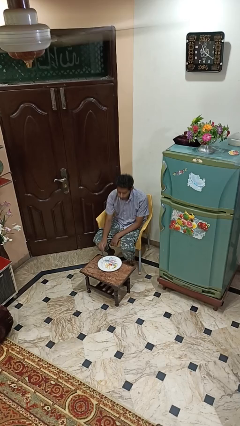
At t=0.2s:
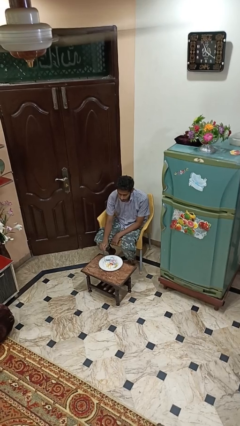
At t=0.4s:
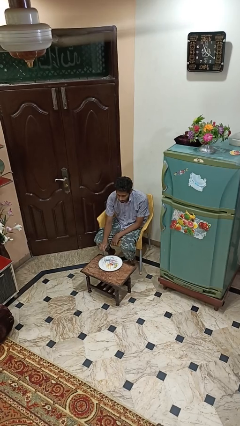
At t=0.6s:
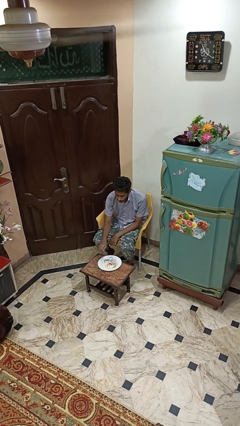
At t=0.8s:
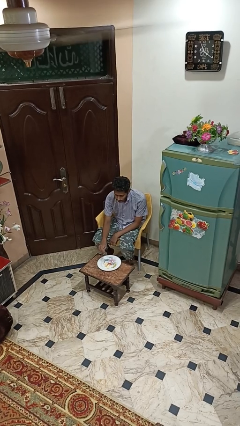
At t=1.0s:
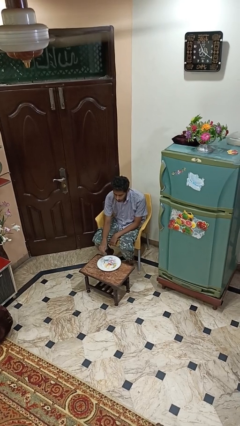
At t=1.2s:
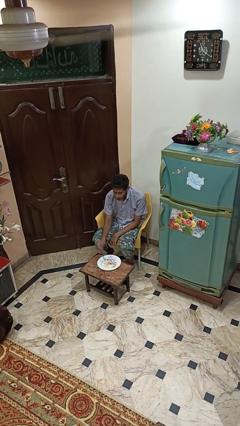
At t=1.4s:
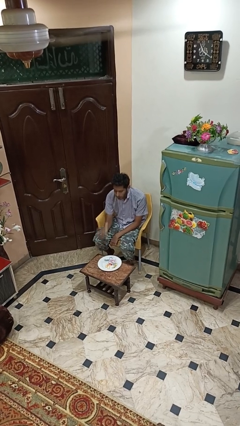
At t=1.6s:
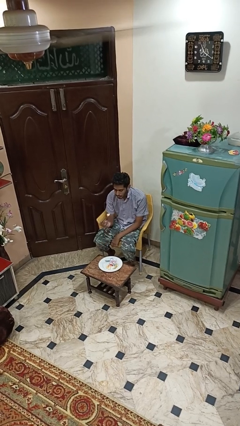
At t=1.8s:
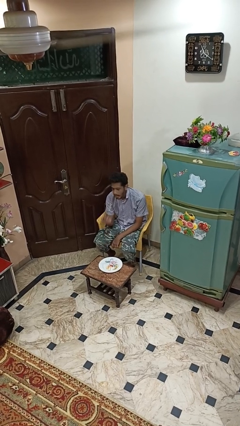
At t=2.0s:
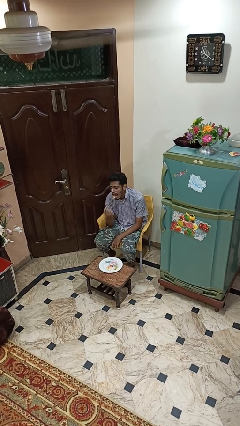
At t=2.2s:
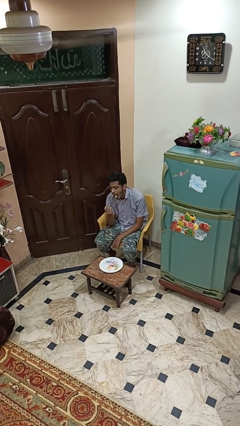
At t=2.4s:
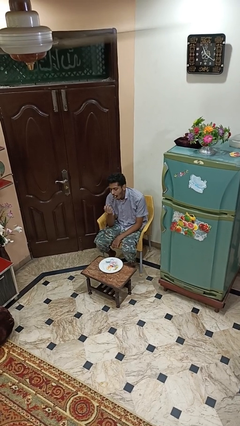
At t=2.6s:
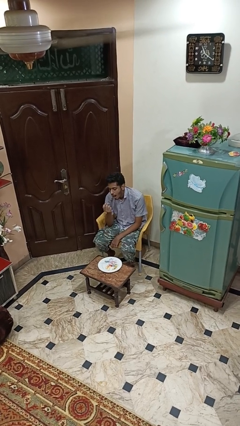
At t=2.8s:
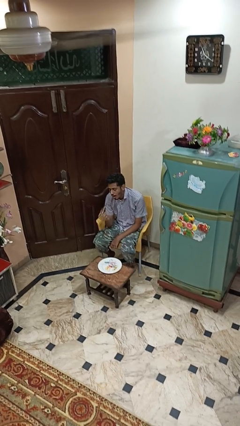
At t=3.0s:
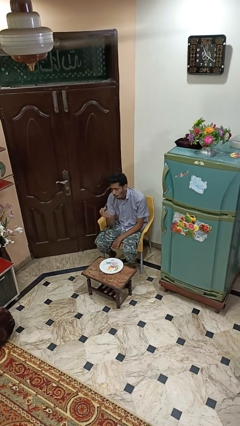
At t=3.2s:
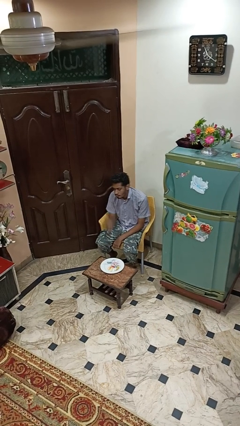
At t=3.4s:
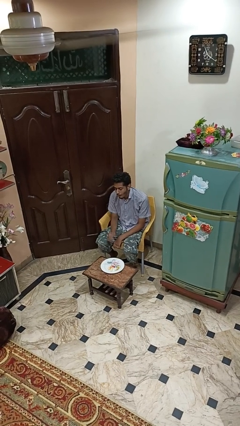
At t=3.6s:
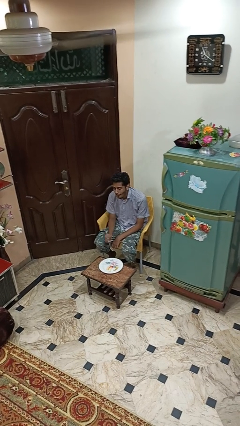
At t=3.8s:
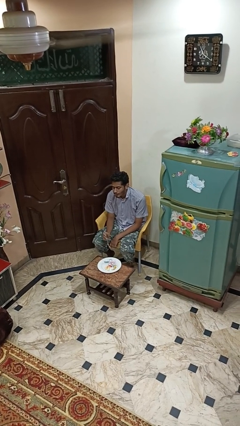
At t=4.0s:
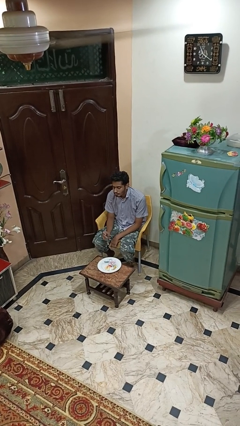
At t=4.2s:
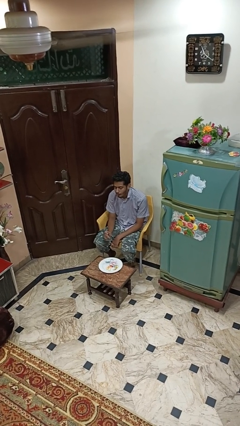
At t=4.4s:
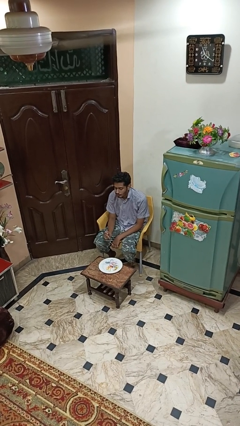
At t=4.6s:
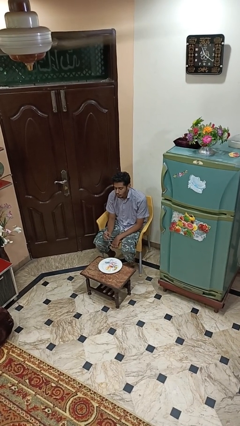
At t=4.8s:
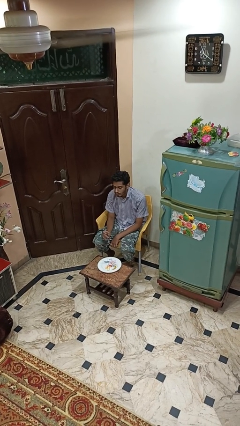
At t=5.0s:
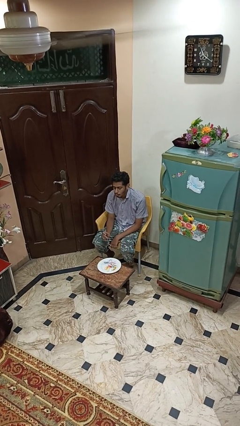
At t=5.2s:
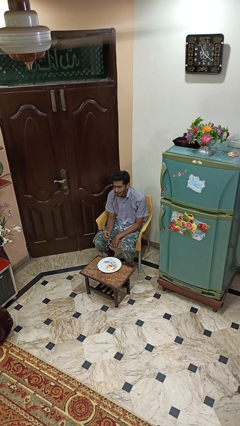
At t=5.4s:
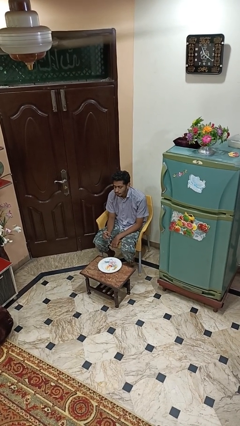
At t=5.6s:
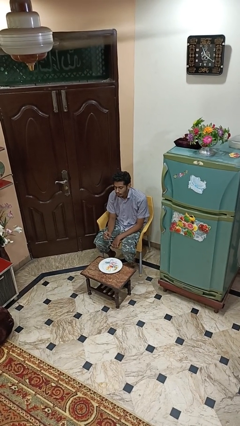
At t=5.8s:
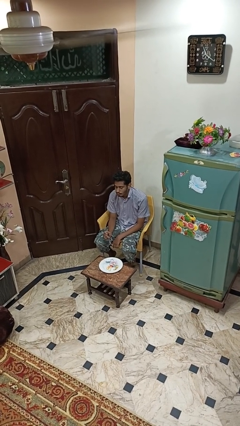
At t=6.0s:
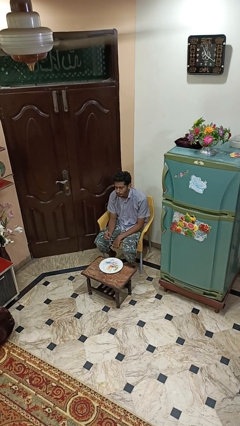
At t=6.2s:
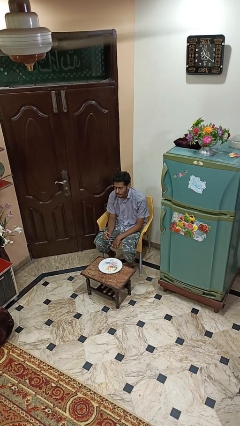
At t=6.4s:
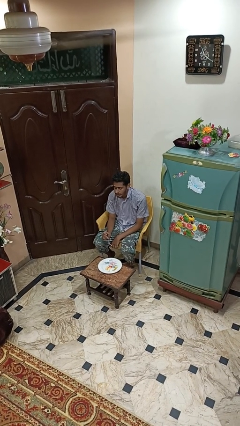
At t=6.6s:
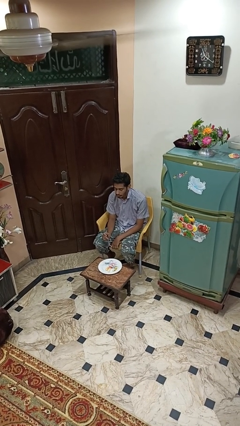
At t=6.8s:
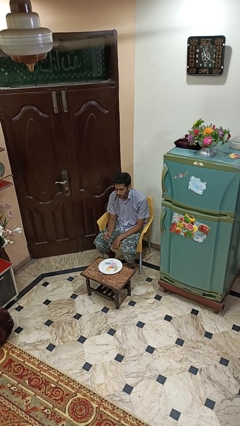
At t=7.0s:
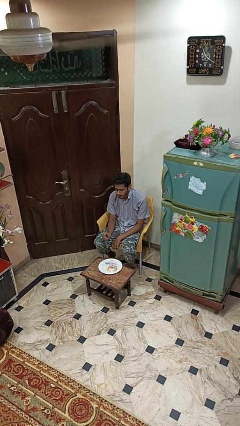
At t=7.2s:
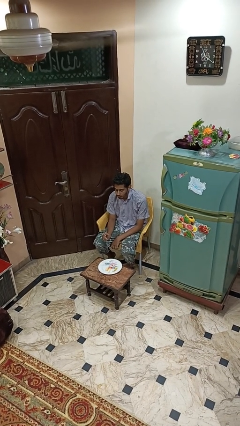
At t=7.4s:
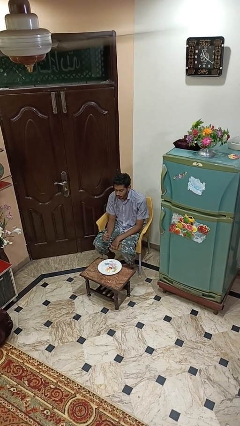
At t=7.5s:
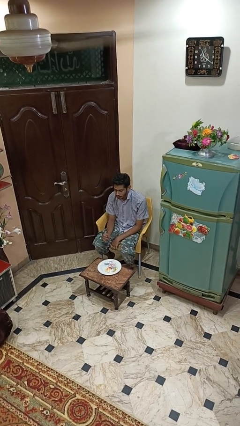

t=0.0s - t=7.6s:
person eats with utensil

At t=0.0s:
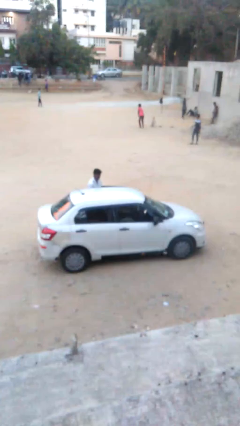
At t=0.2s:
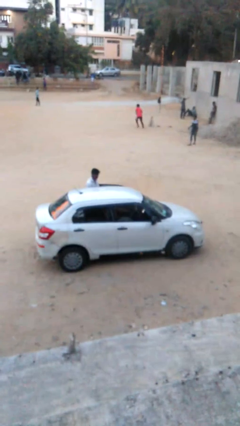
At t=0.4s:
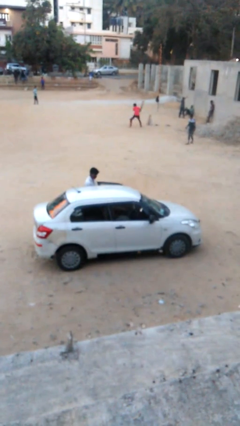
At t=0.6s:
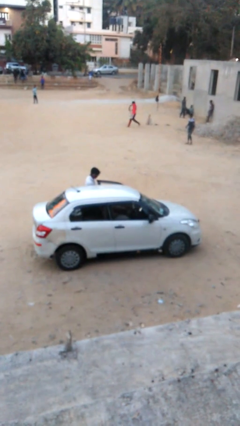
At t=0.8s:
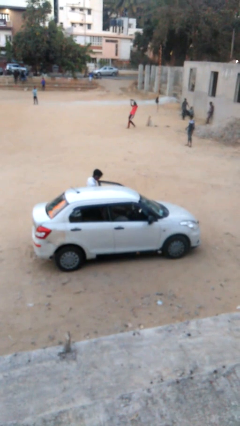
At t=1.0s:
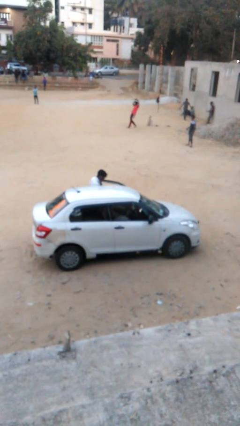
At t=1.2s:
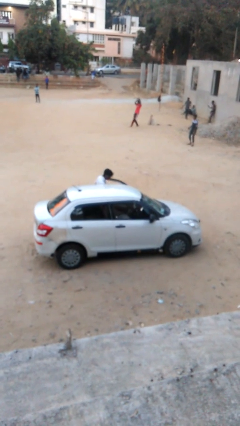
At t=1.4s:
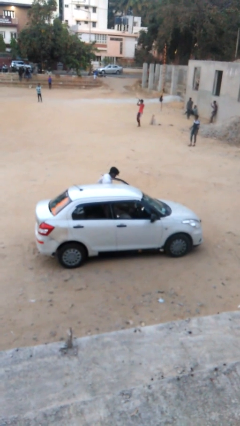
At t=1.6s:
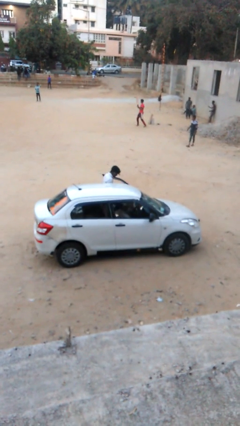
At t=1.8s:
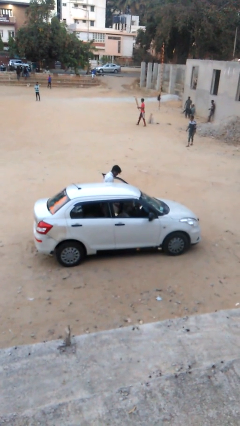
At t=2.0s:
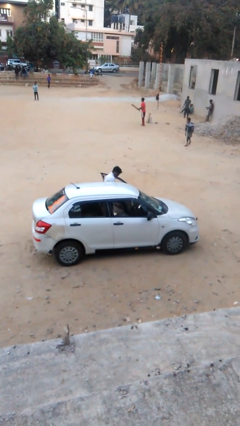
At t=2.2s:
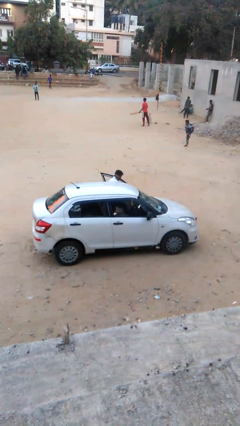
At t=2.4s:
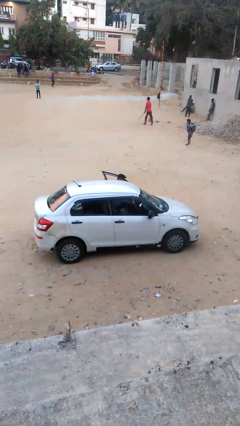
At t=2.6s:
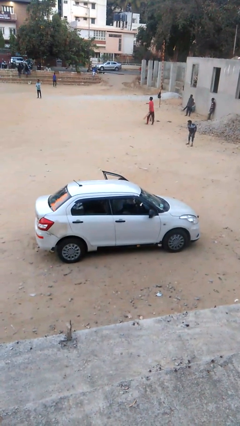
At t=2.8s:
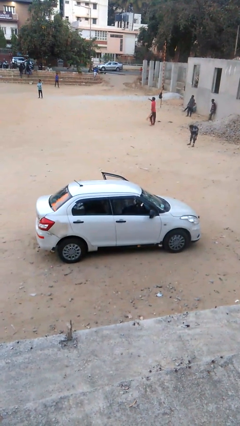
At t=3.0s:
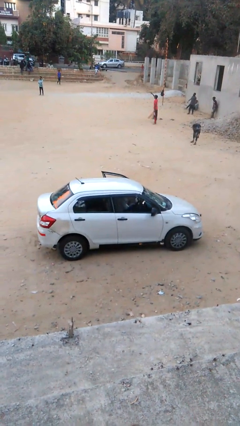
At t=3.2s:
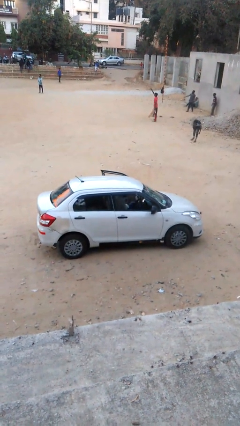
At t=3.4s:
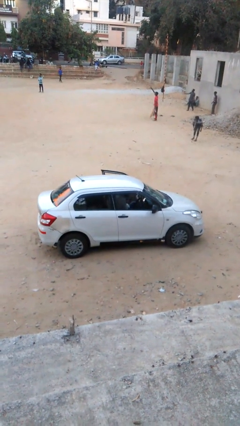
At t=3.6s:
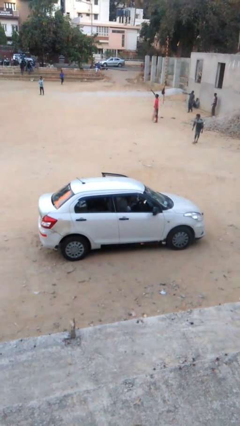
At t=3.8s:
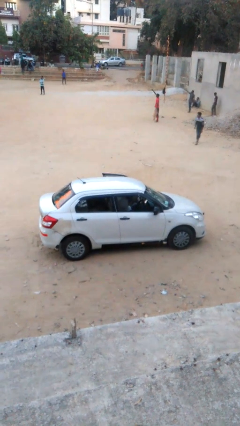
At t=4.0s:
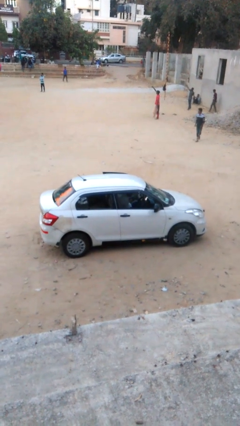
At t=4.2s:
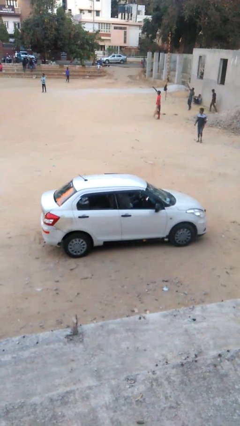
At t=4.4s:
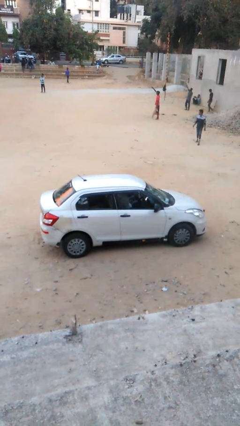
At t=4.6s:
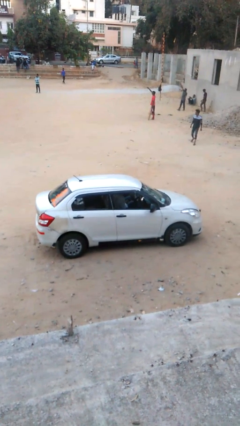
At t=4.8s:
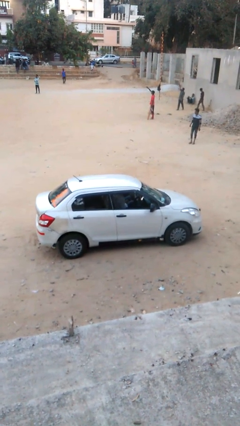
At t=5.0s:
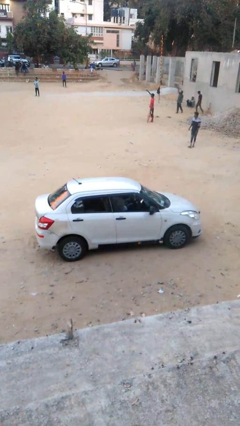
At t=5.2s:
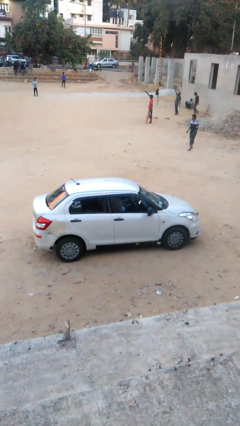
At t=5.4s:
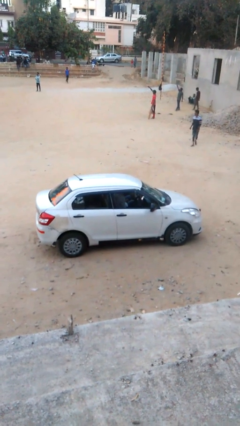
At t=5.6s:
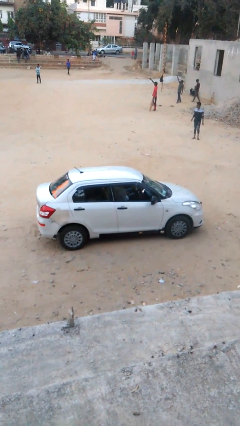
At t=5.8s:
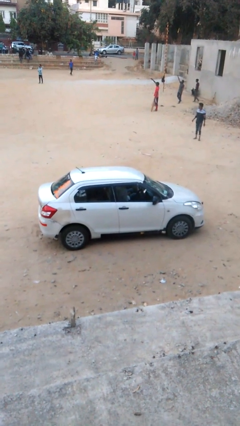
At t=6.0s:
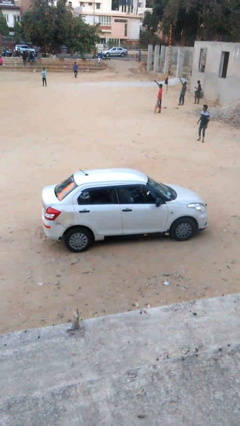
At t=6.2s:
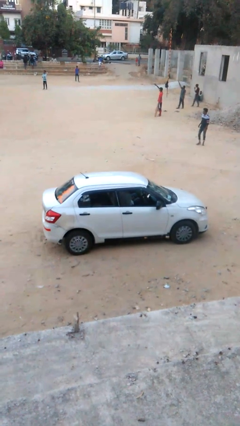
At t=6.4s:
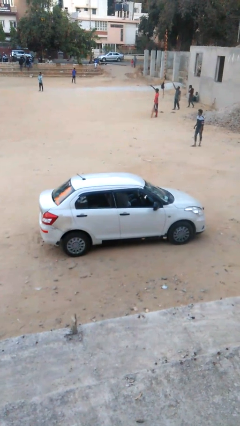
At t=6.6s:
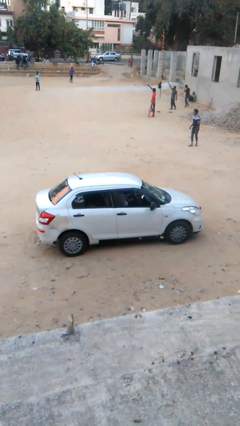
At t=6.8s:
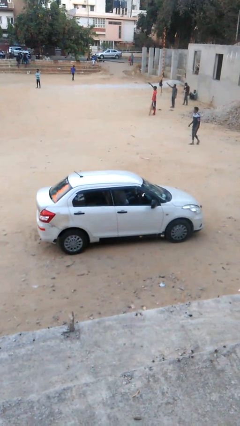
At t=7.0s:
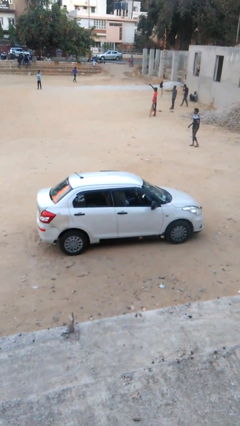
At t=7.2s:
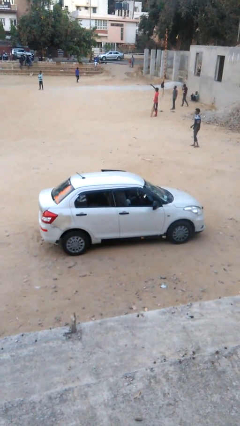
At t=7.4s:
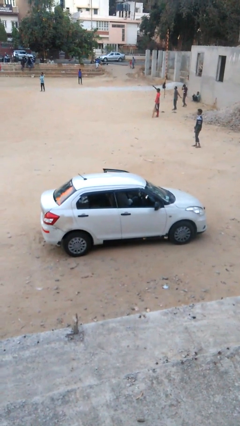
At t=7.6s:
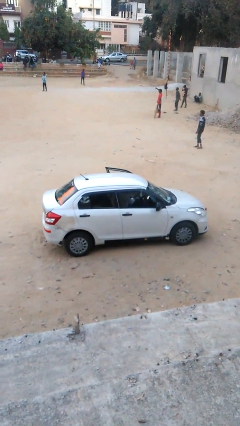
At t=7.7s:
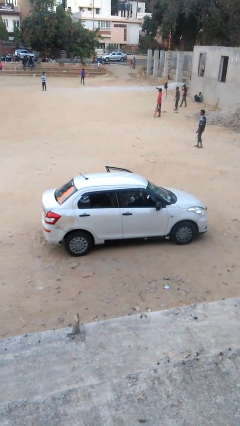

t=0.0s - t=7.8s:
car picks up person

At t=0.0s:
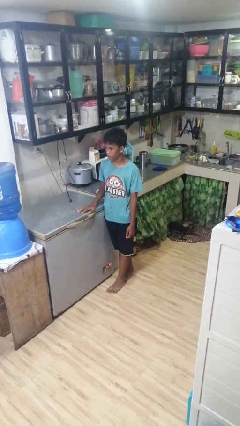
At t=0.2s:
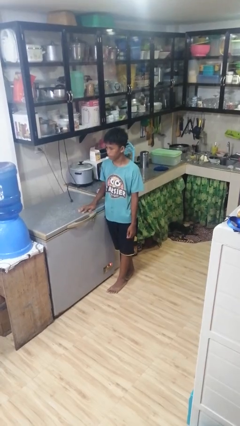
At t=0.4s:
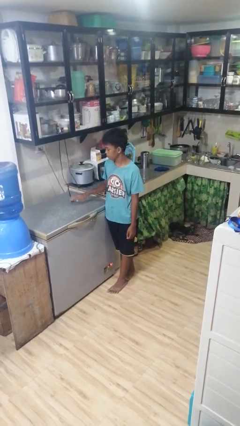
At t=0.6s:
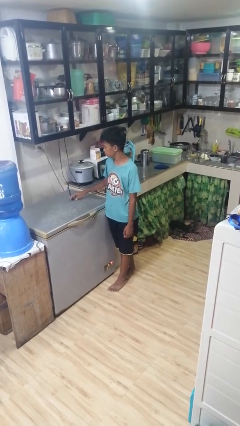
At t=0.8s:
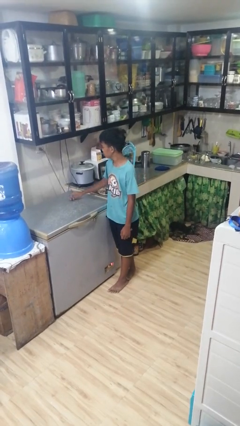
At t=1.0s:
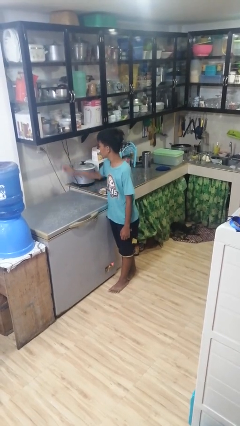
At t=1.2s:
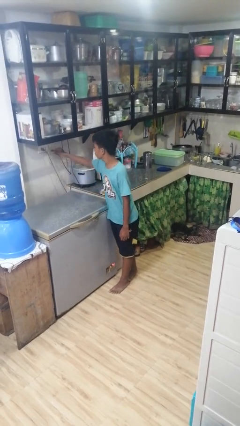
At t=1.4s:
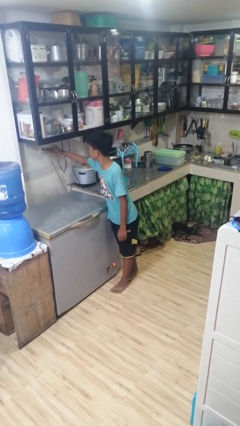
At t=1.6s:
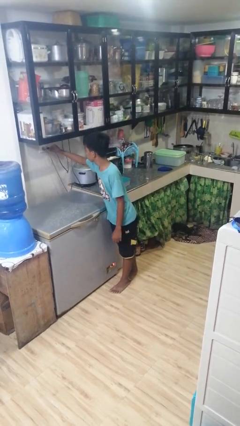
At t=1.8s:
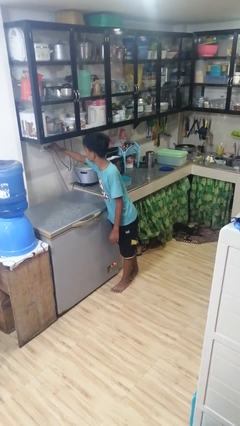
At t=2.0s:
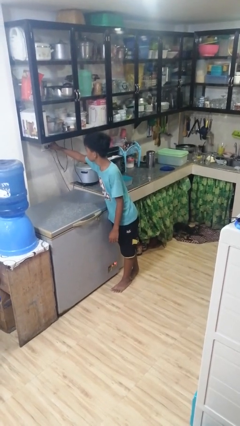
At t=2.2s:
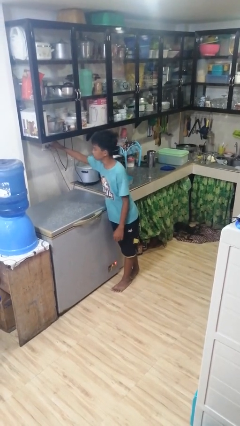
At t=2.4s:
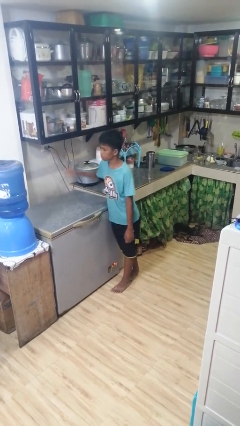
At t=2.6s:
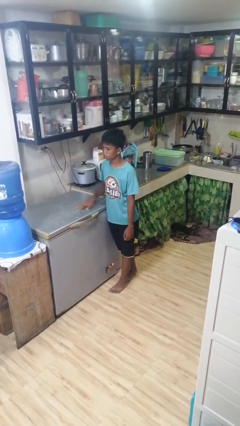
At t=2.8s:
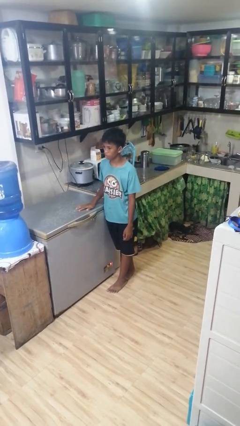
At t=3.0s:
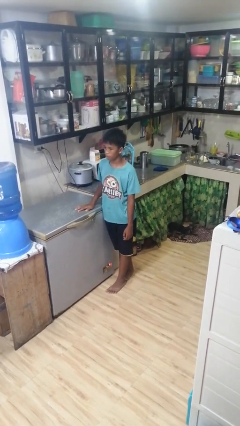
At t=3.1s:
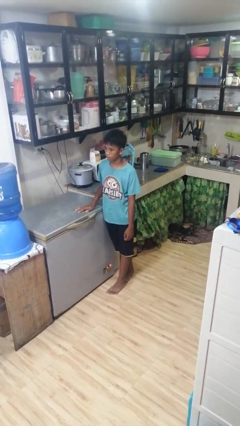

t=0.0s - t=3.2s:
person plugs into electrical socket
